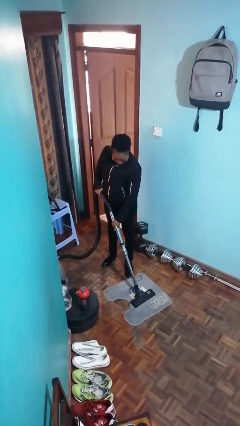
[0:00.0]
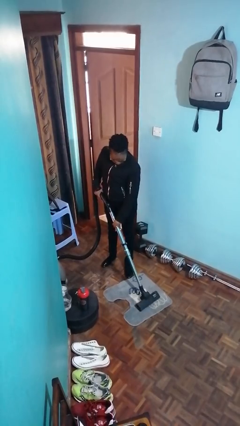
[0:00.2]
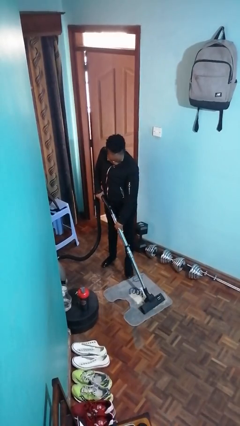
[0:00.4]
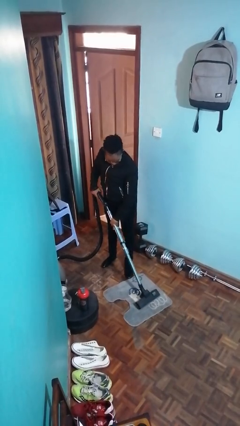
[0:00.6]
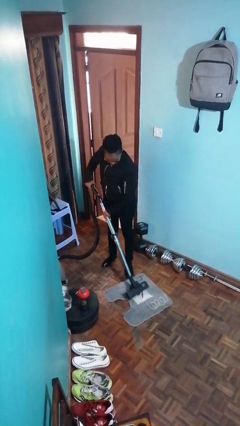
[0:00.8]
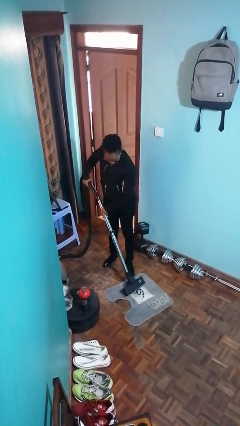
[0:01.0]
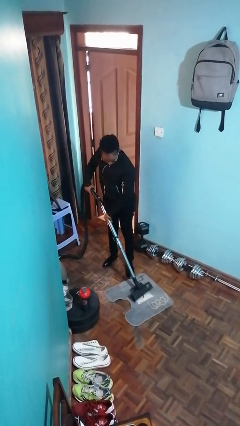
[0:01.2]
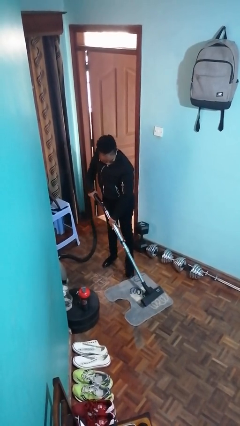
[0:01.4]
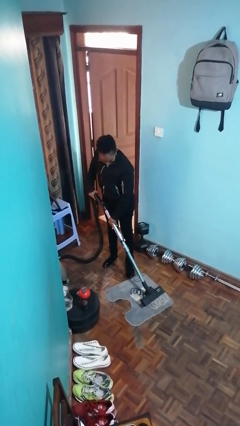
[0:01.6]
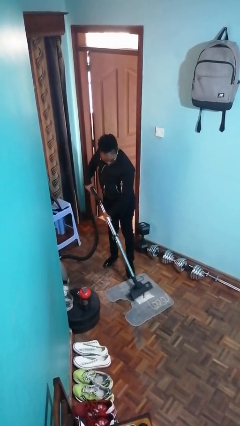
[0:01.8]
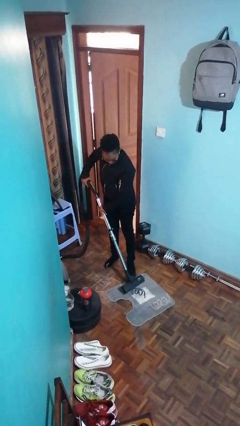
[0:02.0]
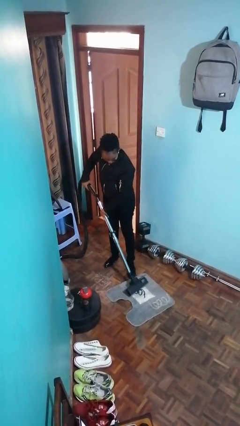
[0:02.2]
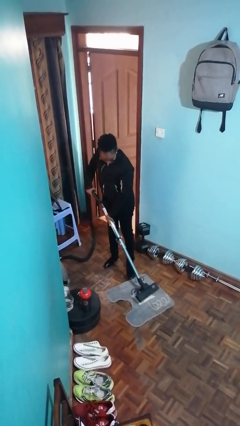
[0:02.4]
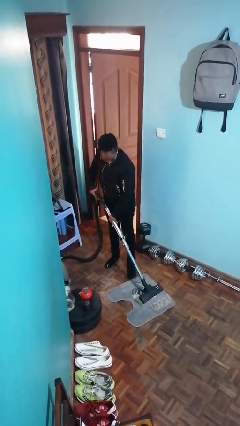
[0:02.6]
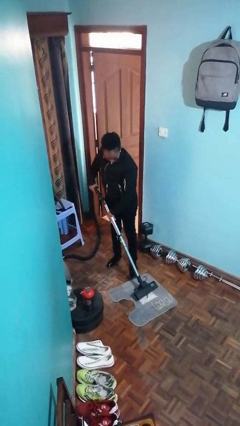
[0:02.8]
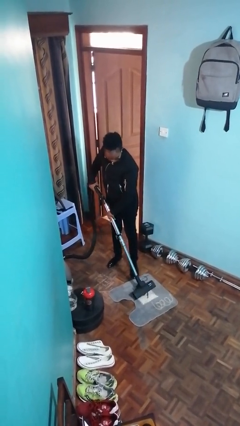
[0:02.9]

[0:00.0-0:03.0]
person vacuums carpet

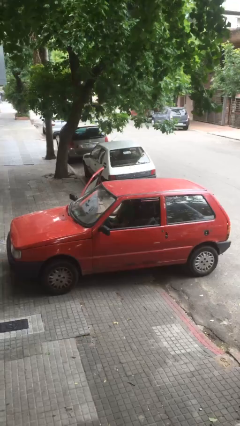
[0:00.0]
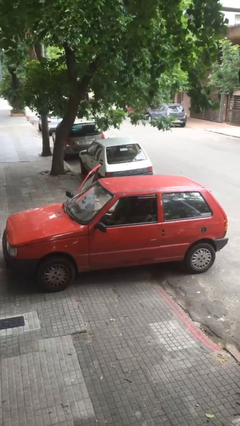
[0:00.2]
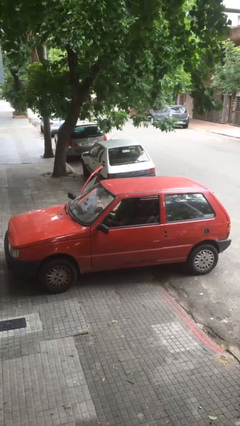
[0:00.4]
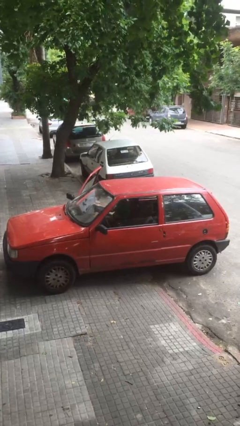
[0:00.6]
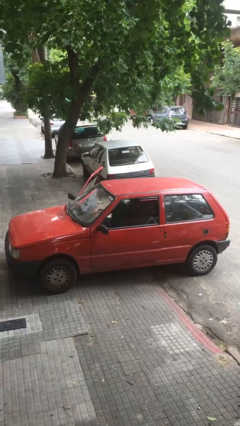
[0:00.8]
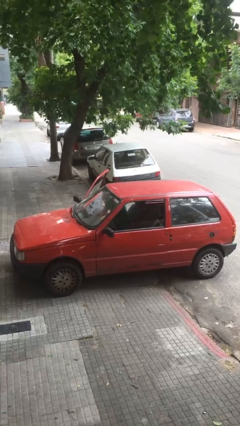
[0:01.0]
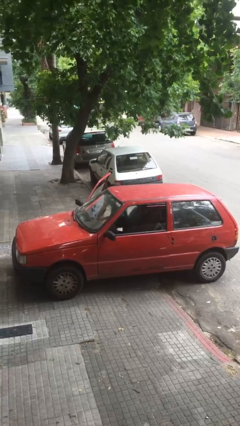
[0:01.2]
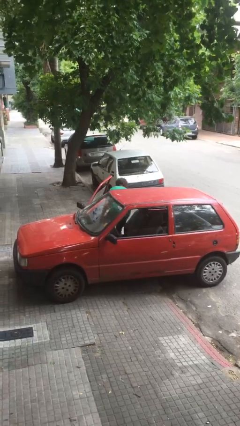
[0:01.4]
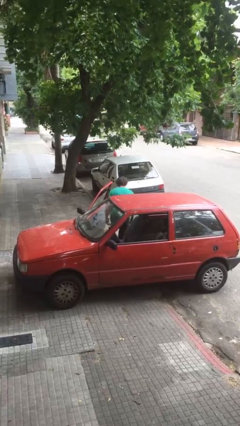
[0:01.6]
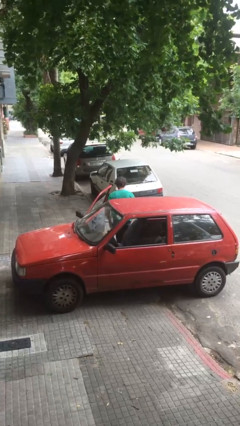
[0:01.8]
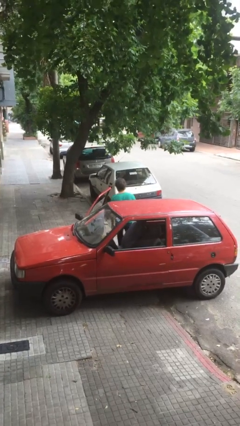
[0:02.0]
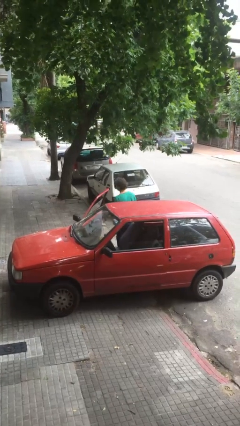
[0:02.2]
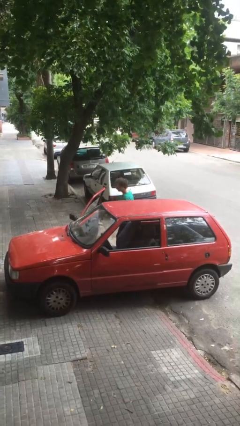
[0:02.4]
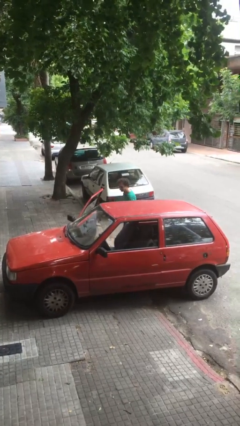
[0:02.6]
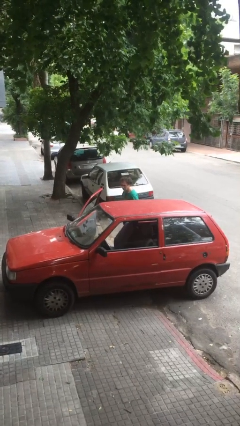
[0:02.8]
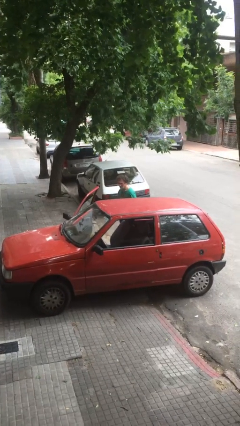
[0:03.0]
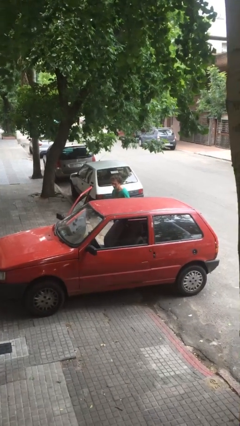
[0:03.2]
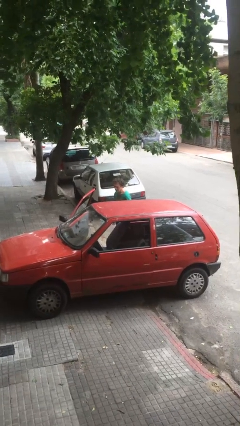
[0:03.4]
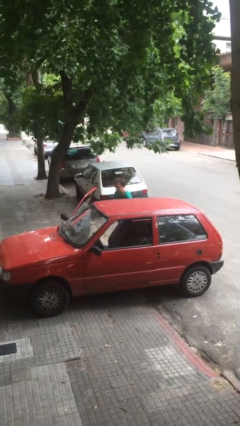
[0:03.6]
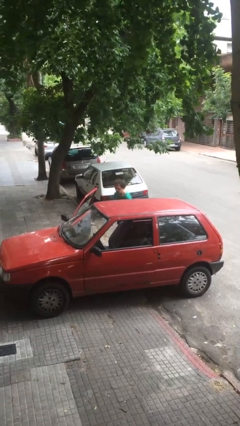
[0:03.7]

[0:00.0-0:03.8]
person exits car

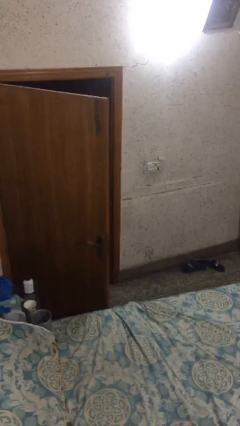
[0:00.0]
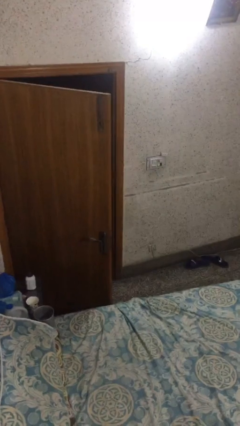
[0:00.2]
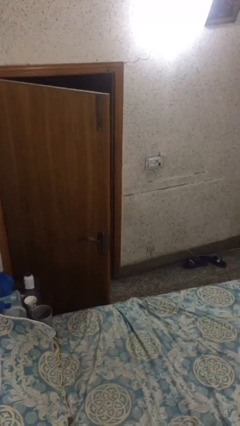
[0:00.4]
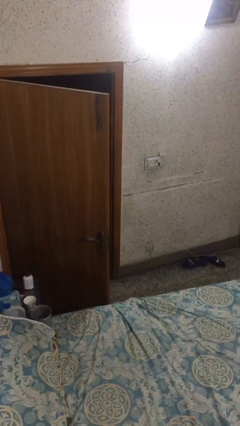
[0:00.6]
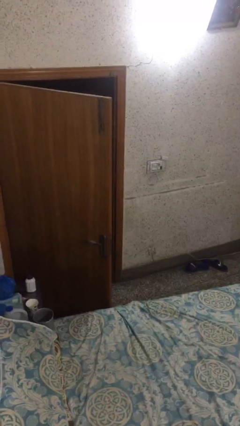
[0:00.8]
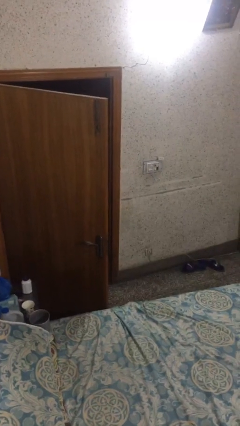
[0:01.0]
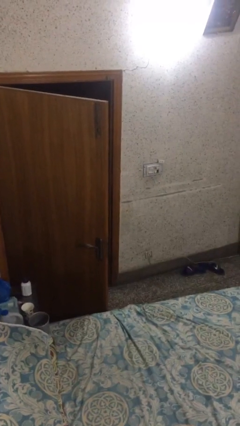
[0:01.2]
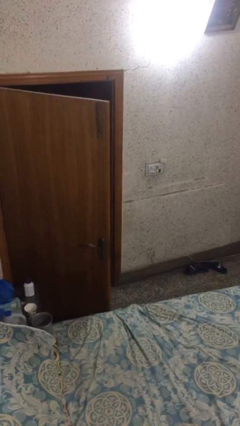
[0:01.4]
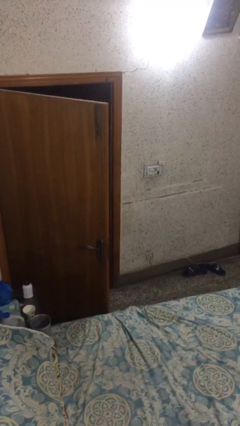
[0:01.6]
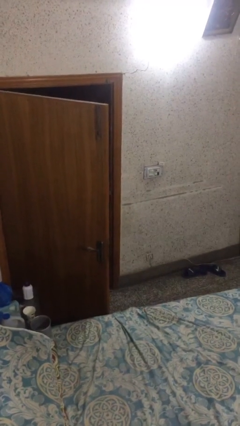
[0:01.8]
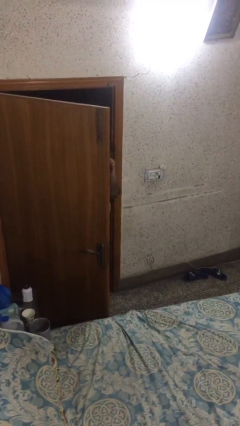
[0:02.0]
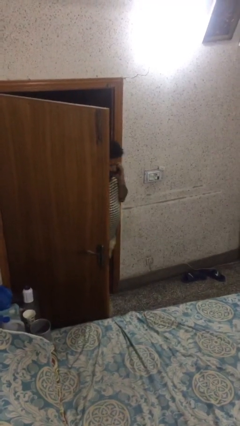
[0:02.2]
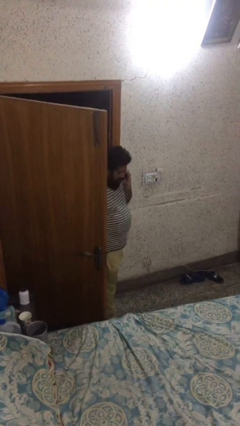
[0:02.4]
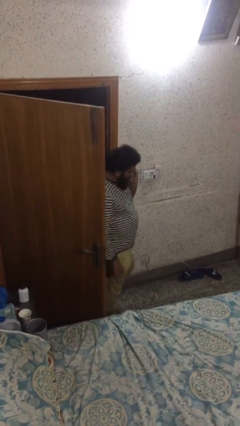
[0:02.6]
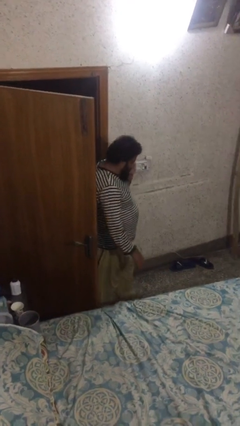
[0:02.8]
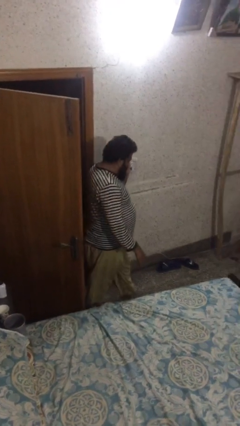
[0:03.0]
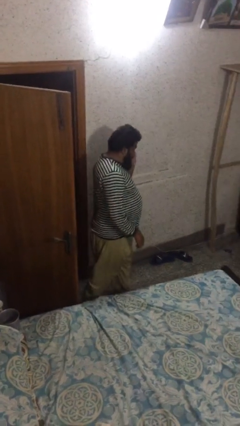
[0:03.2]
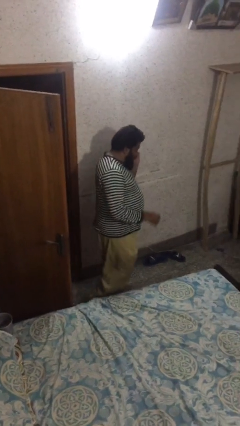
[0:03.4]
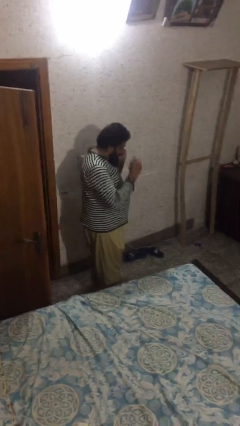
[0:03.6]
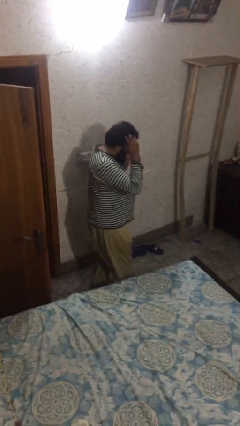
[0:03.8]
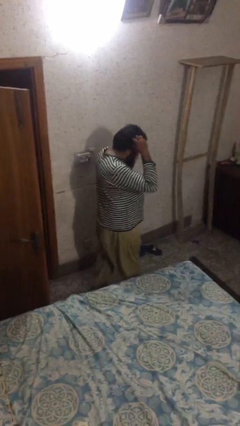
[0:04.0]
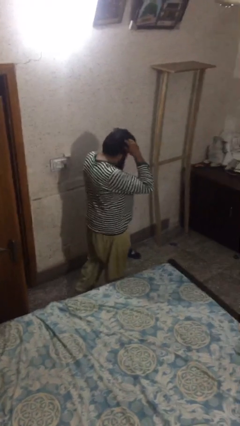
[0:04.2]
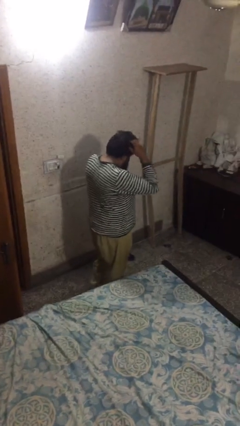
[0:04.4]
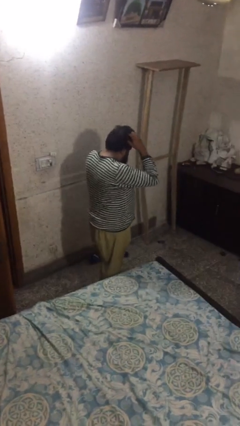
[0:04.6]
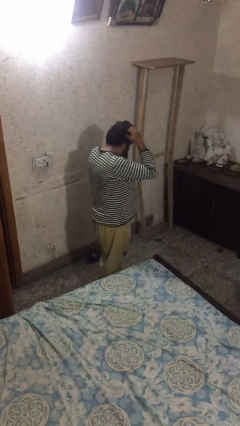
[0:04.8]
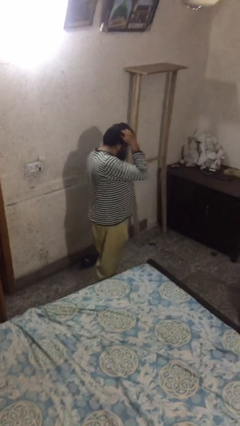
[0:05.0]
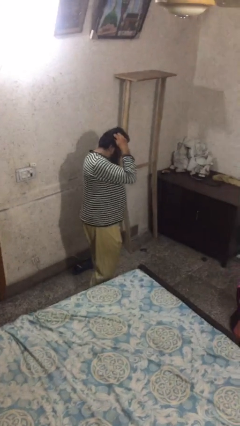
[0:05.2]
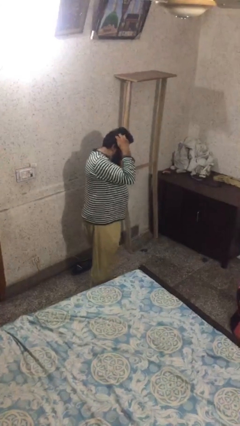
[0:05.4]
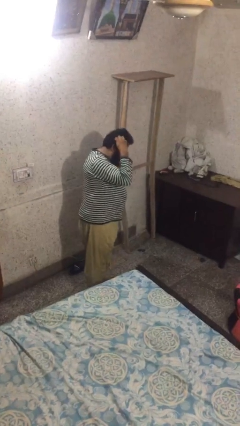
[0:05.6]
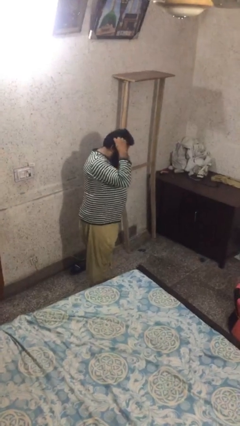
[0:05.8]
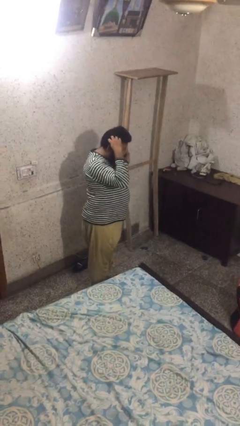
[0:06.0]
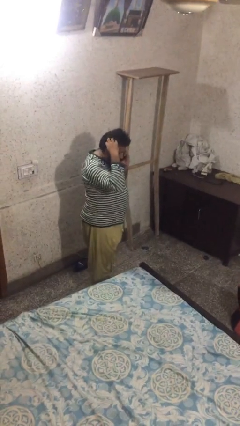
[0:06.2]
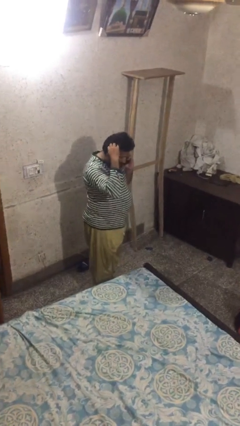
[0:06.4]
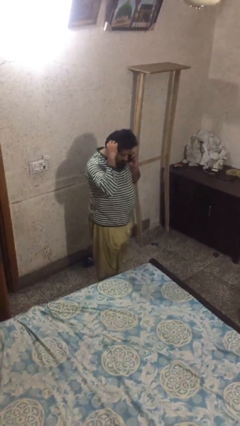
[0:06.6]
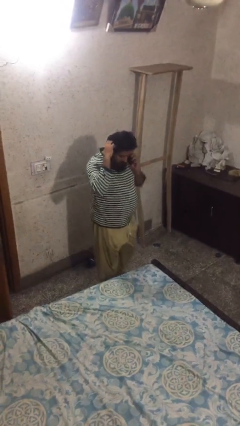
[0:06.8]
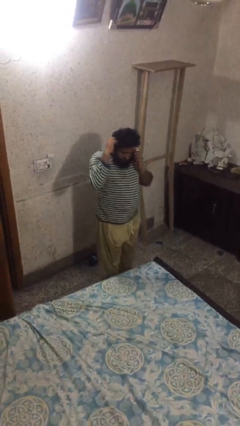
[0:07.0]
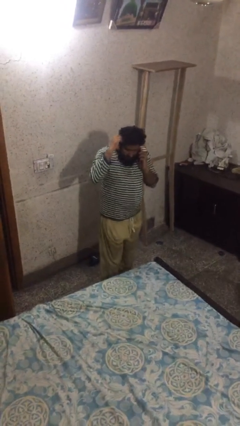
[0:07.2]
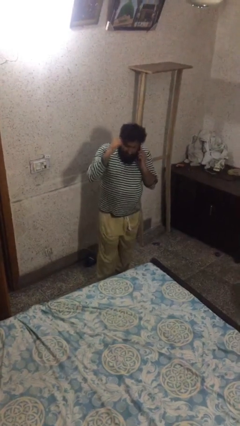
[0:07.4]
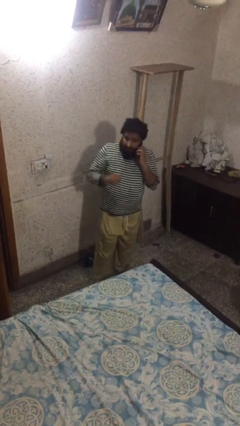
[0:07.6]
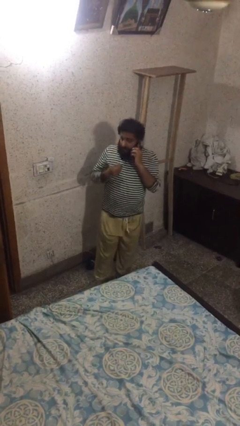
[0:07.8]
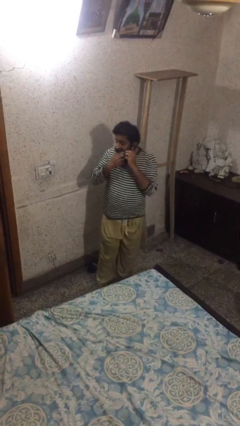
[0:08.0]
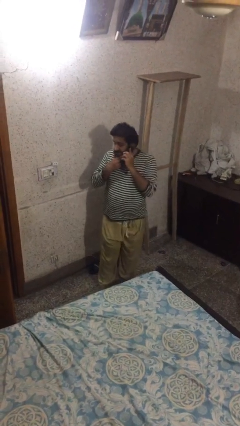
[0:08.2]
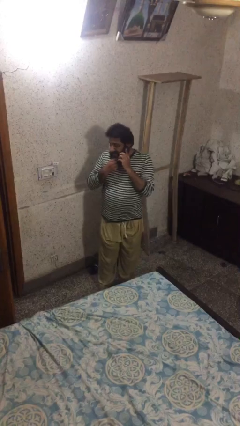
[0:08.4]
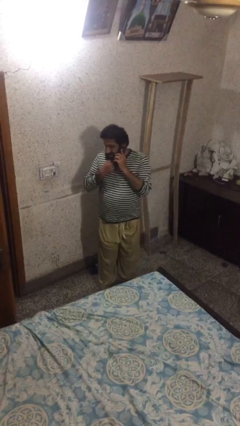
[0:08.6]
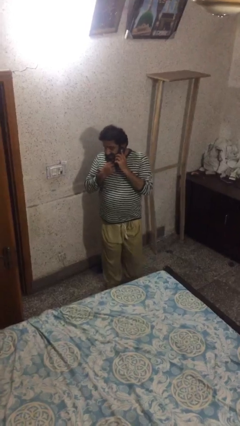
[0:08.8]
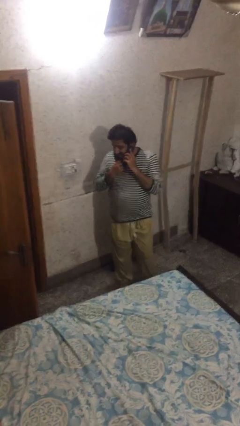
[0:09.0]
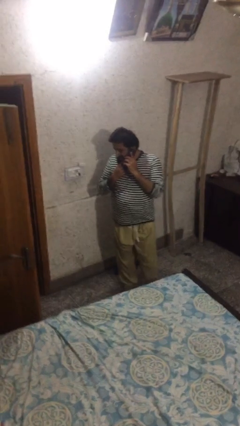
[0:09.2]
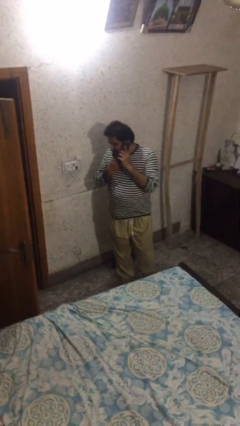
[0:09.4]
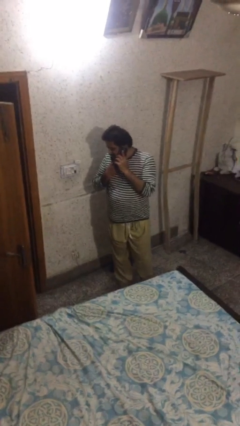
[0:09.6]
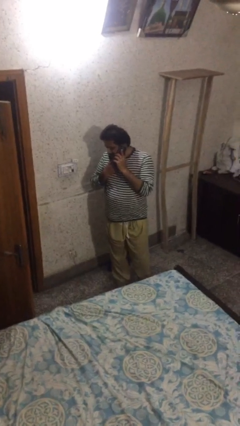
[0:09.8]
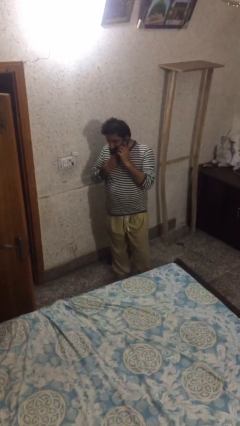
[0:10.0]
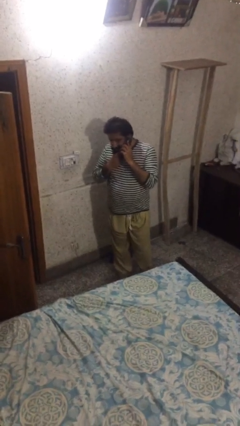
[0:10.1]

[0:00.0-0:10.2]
person enters scene through structure

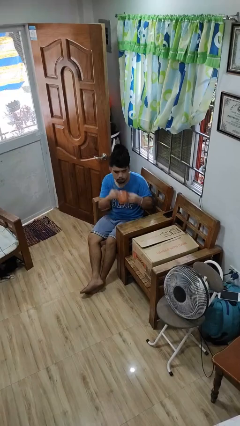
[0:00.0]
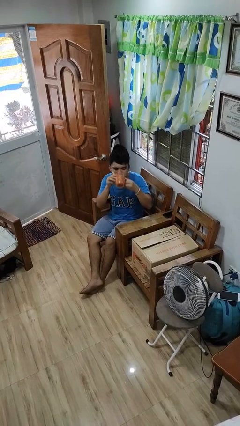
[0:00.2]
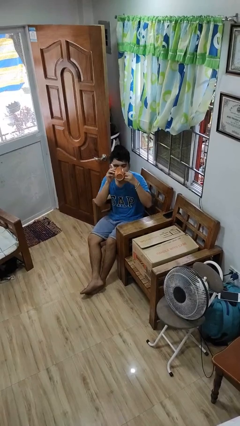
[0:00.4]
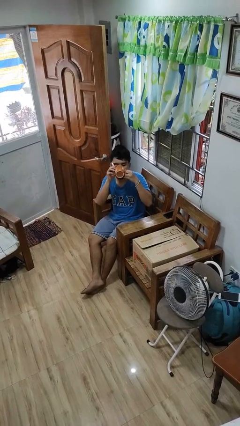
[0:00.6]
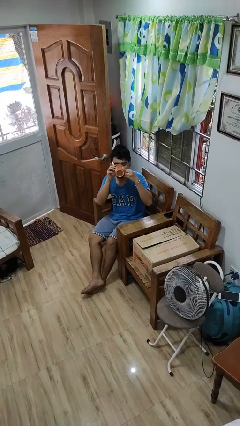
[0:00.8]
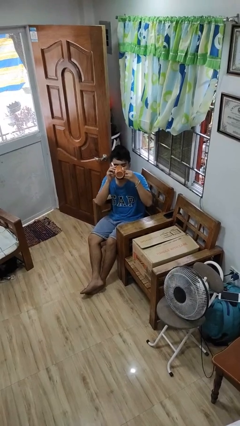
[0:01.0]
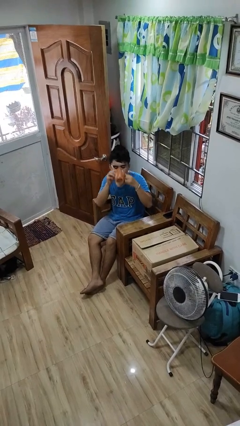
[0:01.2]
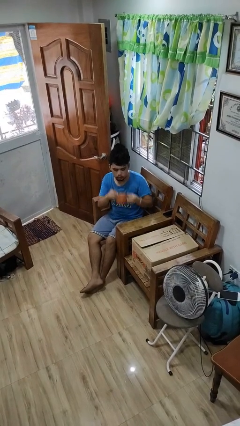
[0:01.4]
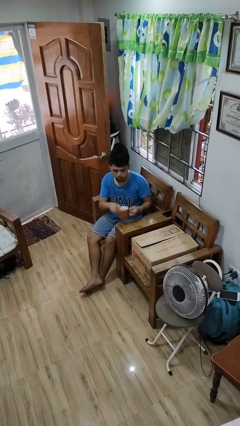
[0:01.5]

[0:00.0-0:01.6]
person drinks from mug
